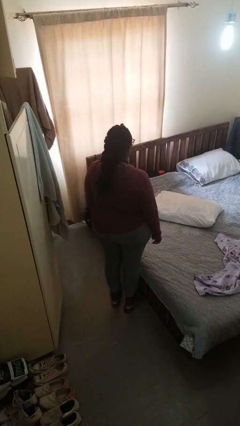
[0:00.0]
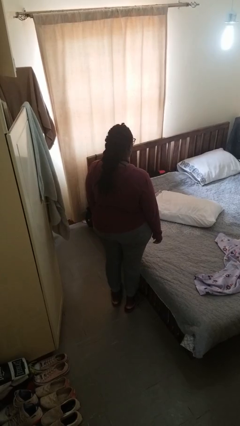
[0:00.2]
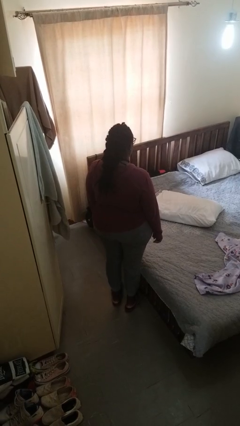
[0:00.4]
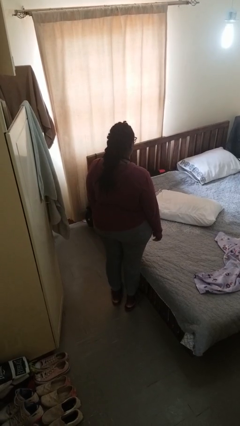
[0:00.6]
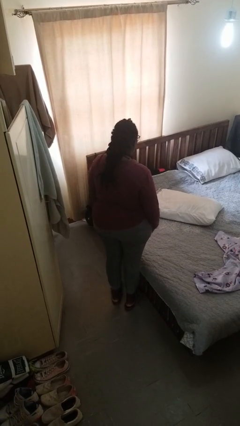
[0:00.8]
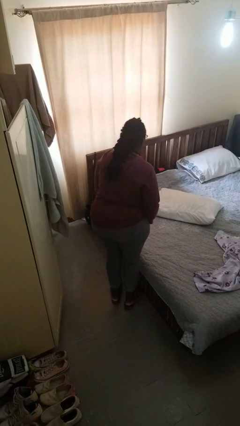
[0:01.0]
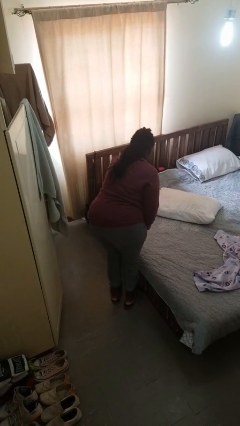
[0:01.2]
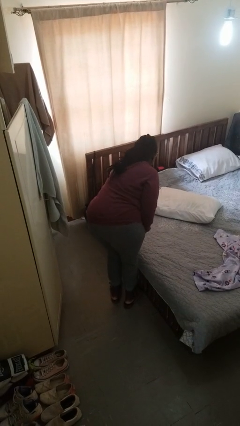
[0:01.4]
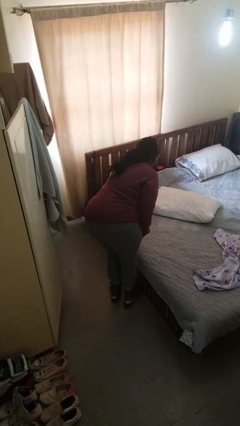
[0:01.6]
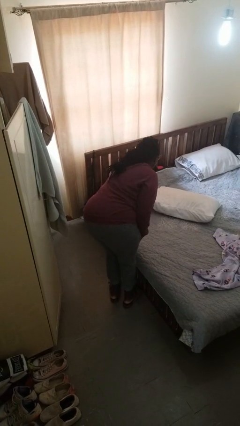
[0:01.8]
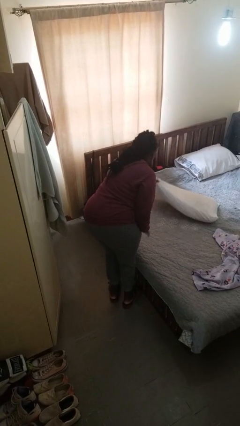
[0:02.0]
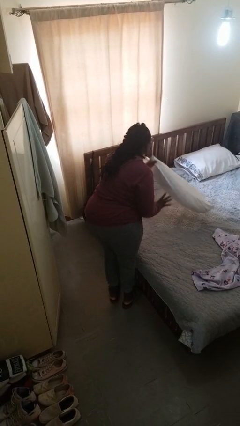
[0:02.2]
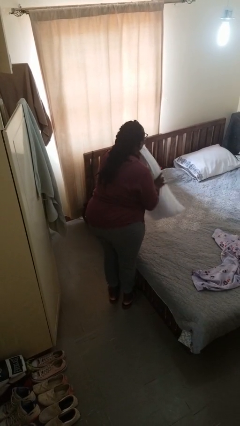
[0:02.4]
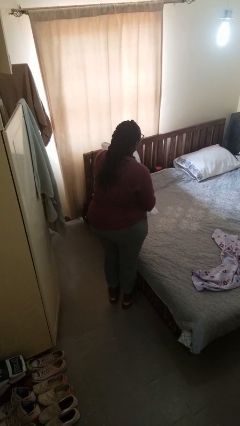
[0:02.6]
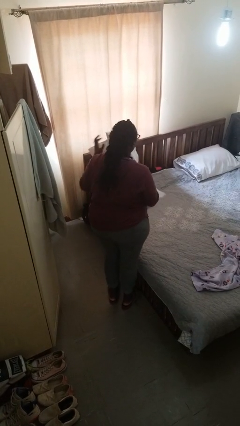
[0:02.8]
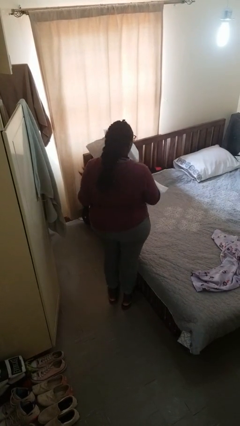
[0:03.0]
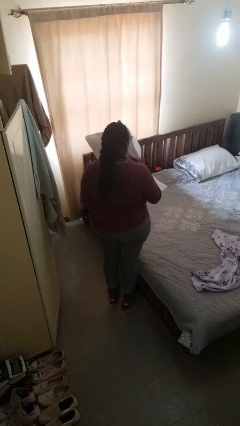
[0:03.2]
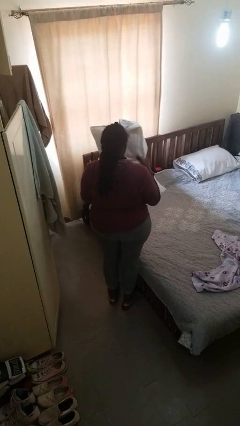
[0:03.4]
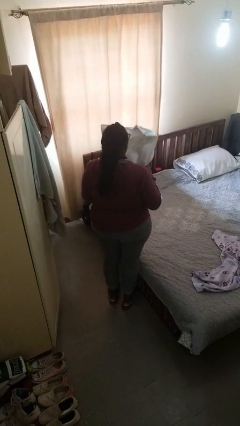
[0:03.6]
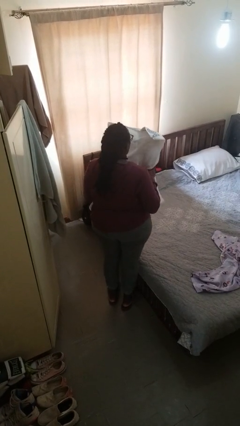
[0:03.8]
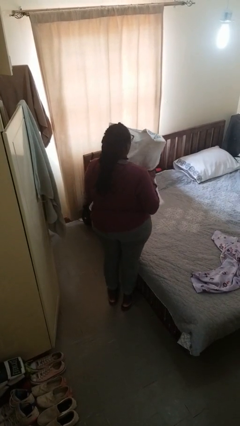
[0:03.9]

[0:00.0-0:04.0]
person picks up object from bed

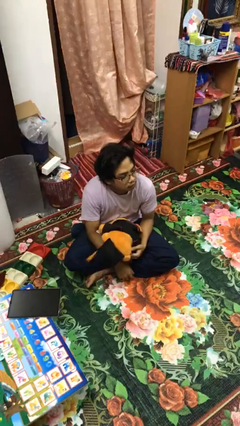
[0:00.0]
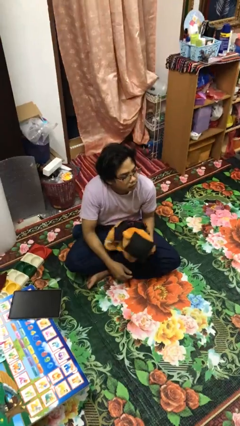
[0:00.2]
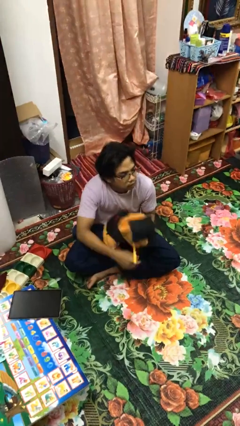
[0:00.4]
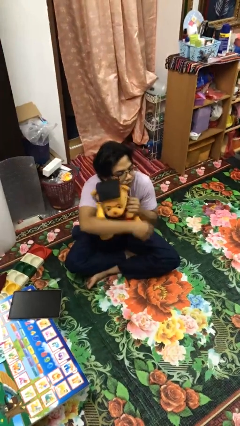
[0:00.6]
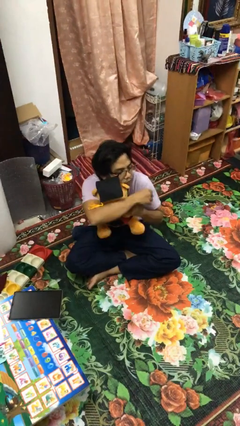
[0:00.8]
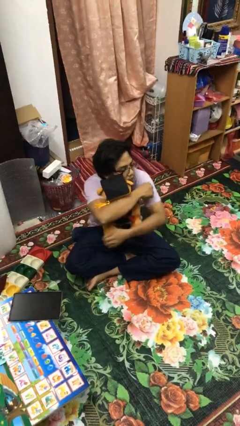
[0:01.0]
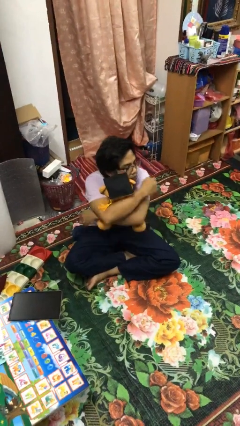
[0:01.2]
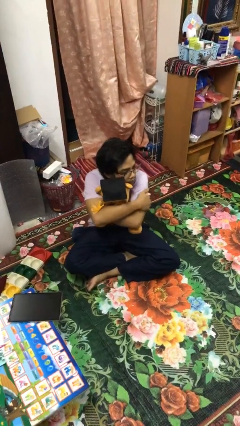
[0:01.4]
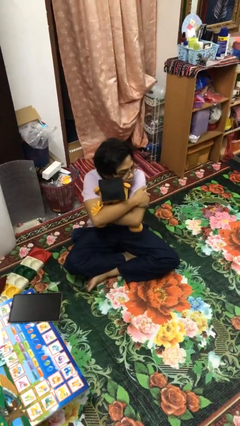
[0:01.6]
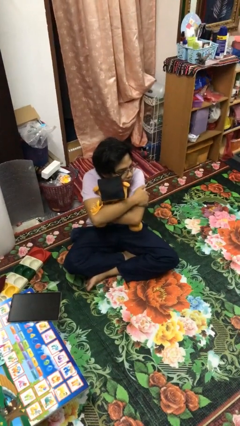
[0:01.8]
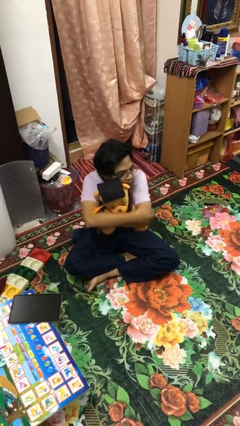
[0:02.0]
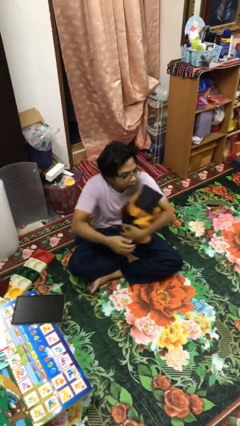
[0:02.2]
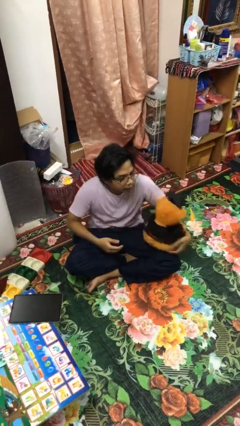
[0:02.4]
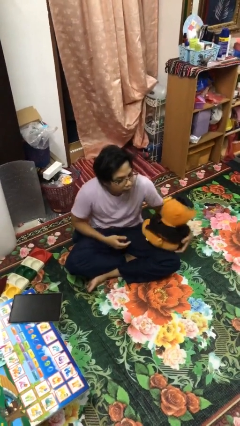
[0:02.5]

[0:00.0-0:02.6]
person hugs stuffed animal

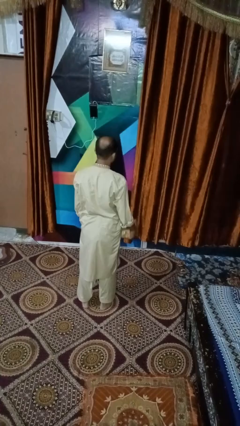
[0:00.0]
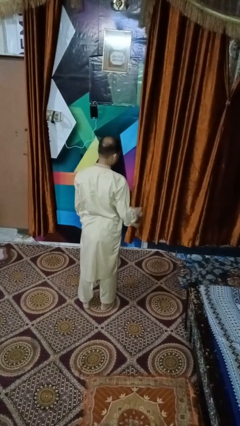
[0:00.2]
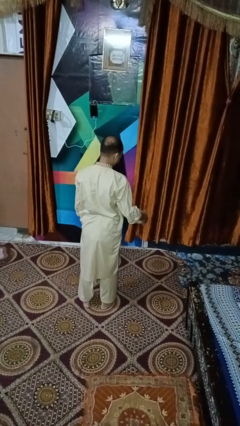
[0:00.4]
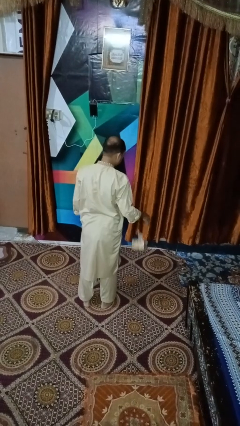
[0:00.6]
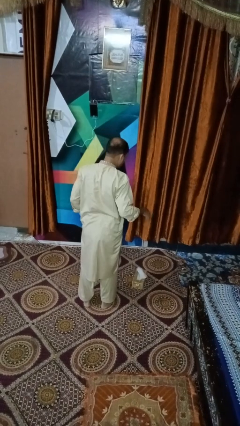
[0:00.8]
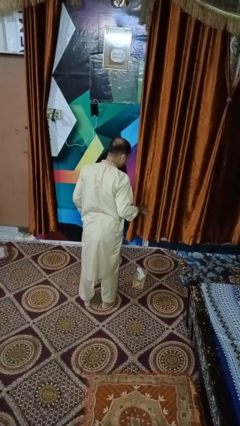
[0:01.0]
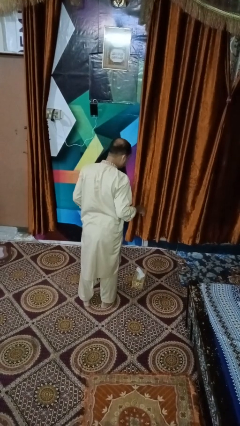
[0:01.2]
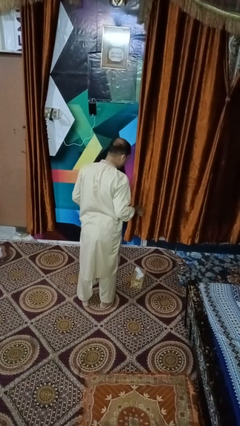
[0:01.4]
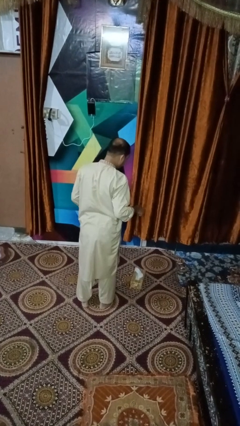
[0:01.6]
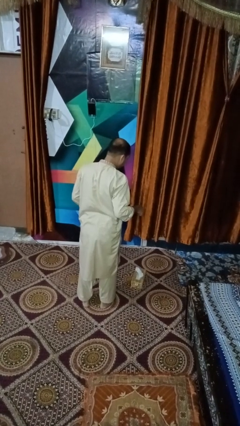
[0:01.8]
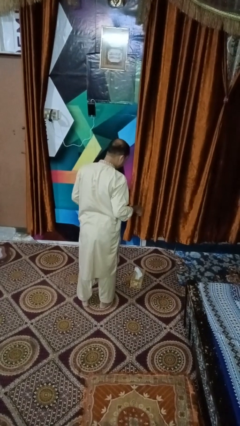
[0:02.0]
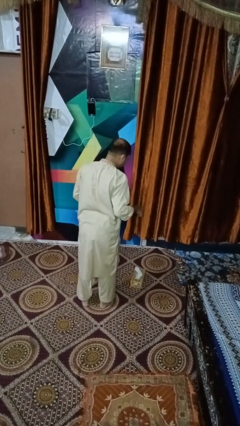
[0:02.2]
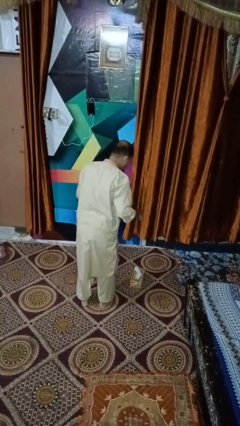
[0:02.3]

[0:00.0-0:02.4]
person drops object

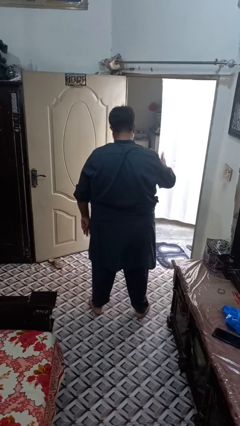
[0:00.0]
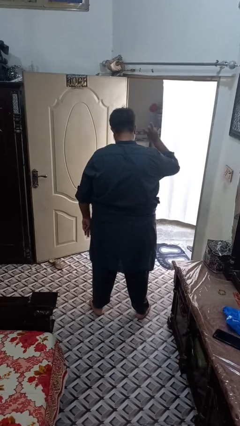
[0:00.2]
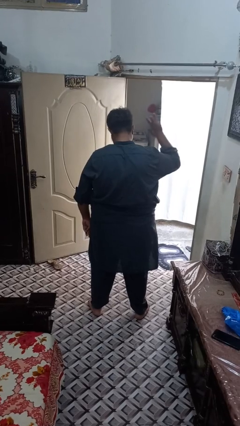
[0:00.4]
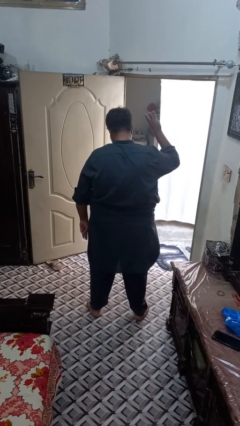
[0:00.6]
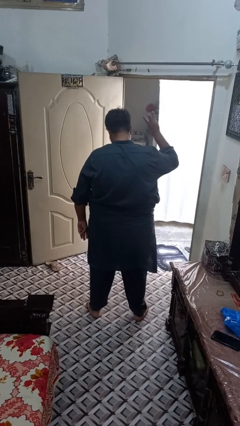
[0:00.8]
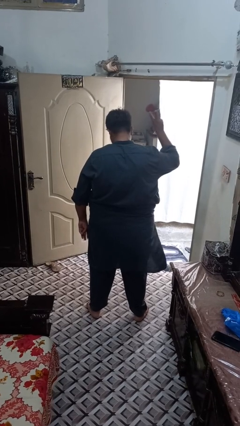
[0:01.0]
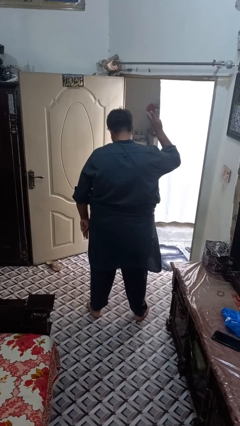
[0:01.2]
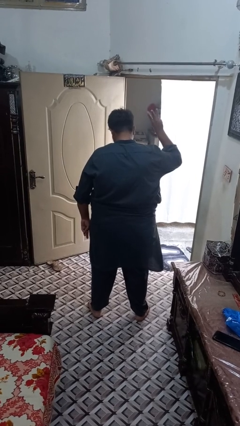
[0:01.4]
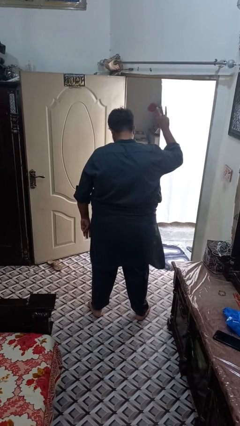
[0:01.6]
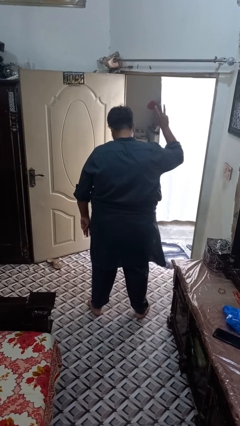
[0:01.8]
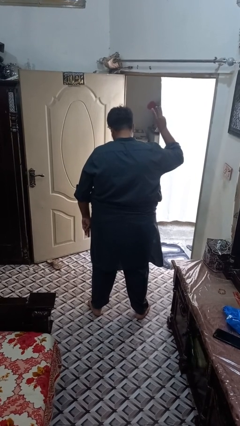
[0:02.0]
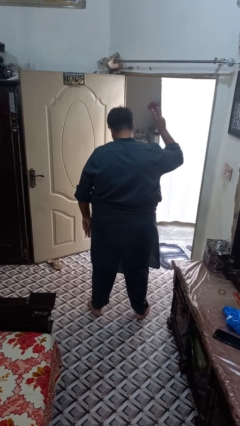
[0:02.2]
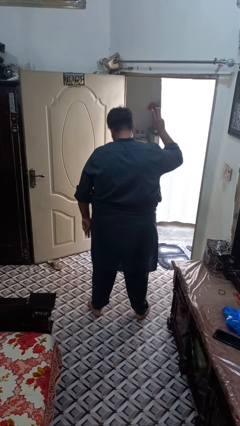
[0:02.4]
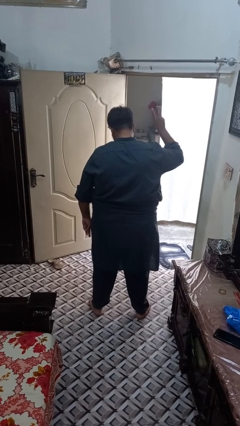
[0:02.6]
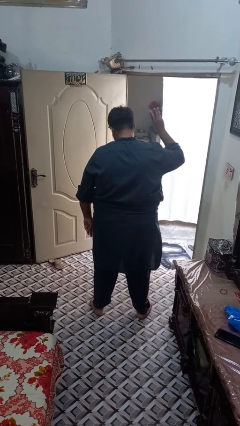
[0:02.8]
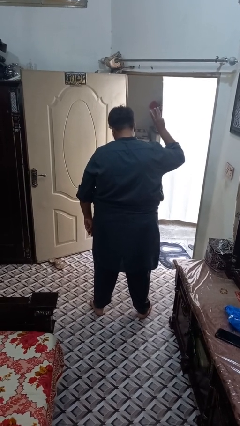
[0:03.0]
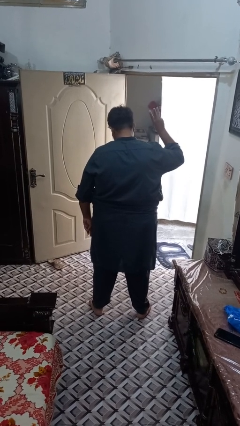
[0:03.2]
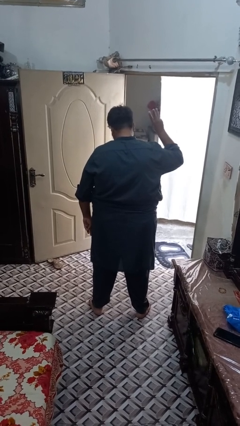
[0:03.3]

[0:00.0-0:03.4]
person gestures number three

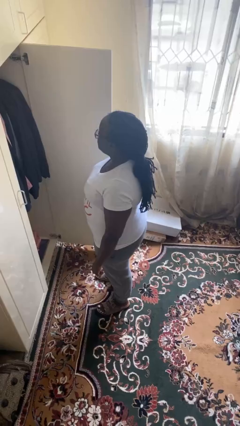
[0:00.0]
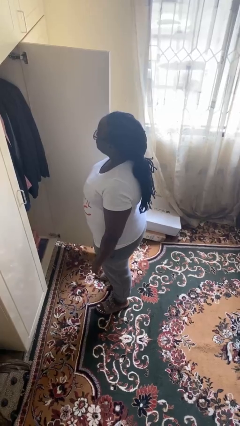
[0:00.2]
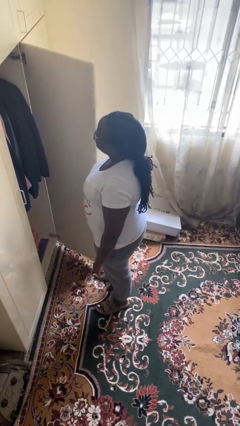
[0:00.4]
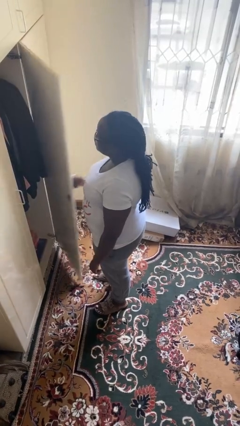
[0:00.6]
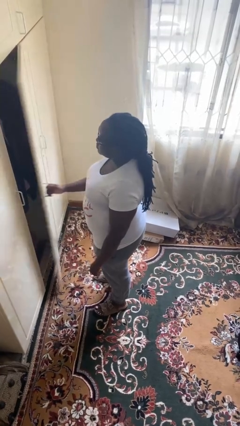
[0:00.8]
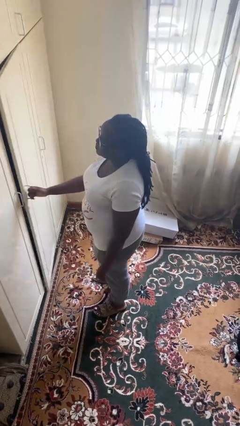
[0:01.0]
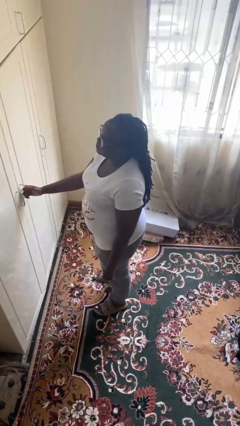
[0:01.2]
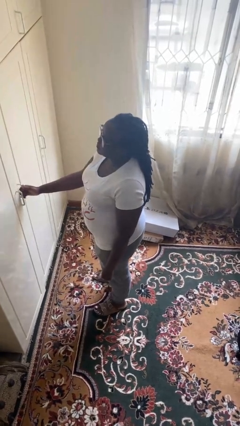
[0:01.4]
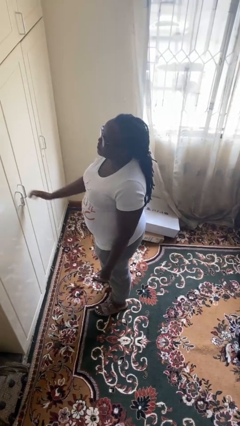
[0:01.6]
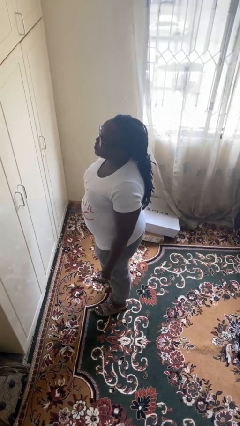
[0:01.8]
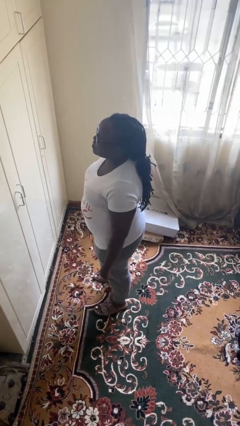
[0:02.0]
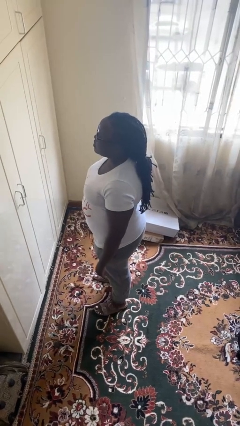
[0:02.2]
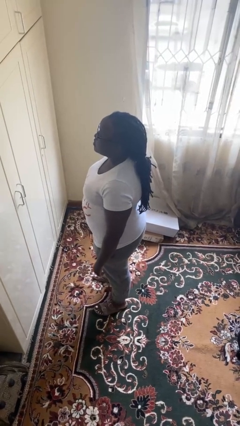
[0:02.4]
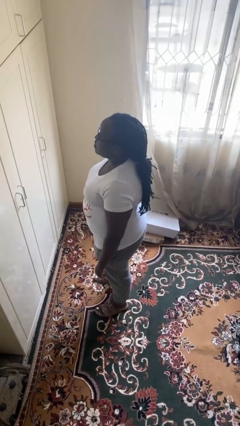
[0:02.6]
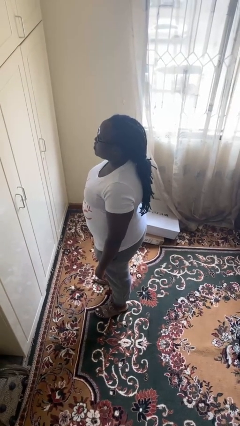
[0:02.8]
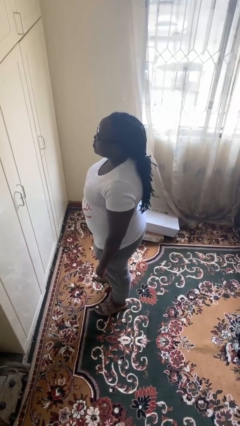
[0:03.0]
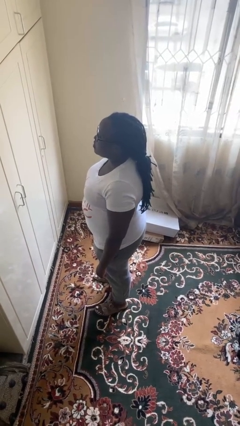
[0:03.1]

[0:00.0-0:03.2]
person closes closet door

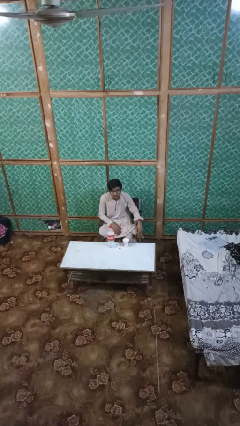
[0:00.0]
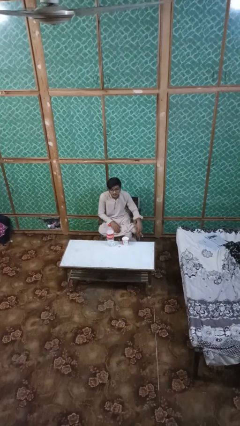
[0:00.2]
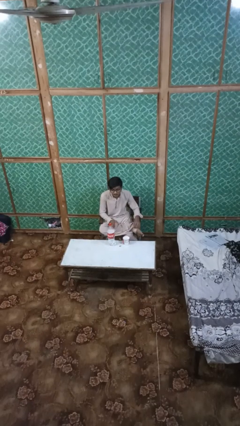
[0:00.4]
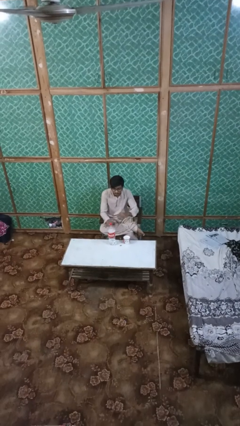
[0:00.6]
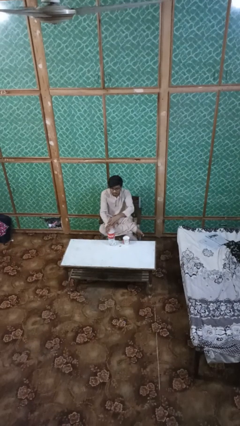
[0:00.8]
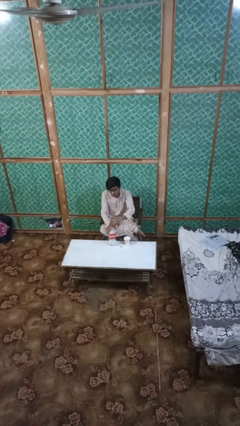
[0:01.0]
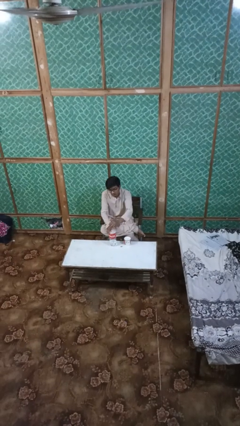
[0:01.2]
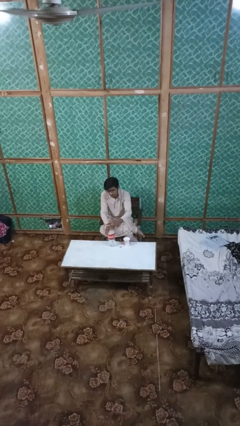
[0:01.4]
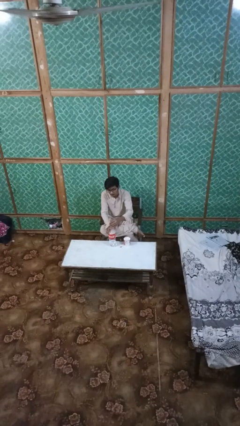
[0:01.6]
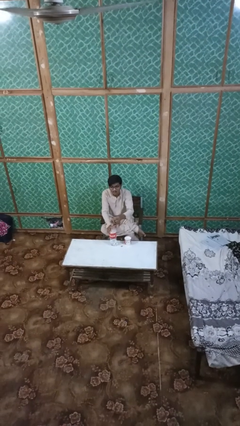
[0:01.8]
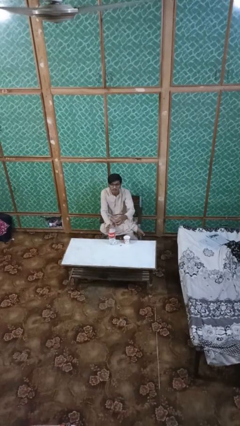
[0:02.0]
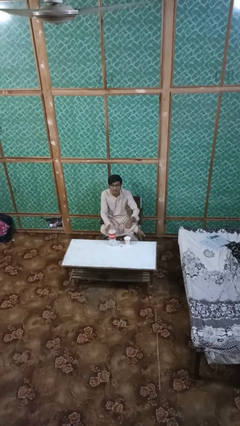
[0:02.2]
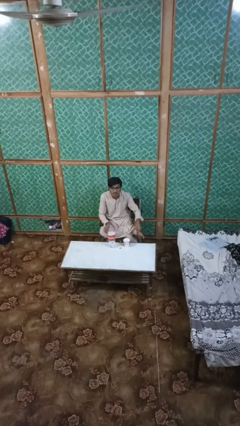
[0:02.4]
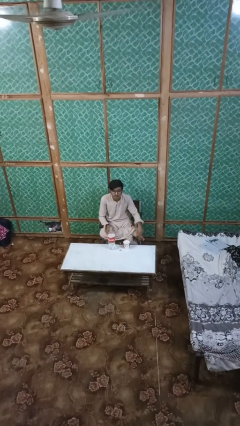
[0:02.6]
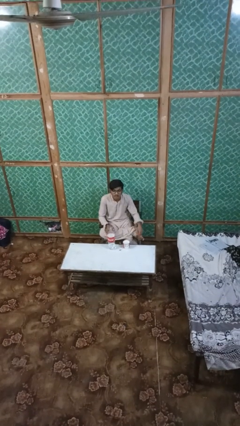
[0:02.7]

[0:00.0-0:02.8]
person unscrews lid from bottle
